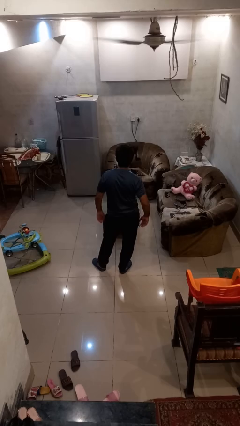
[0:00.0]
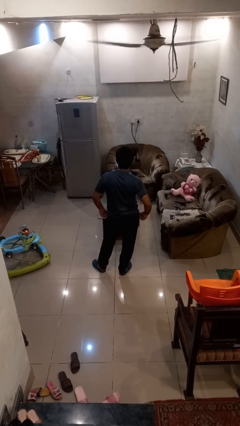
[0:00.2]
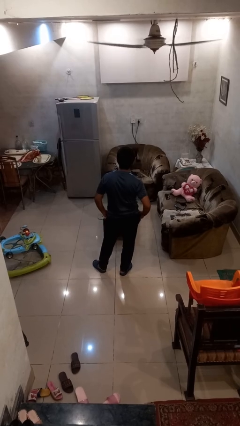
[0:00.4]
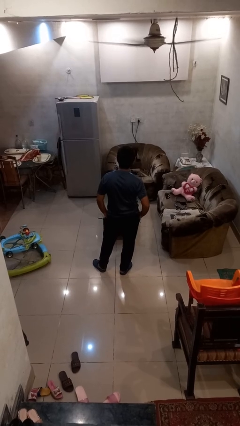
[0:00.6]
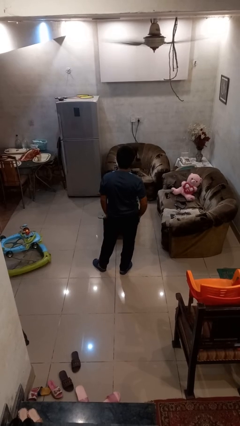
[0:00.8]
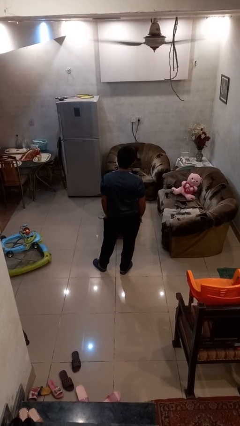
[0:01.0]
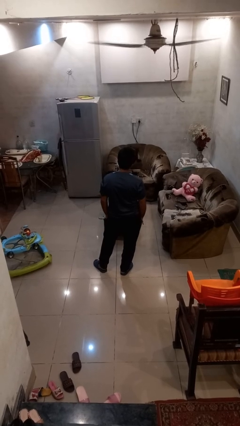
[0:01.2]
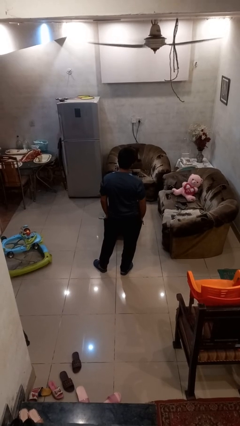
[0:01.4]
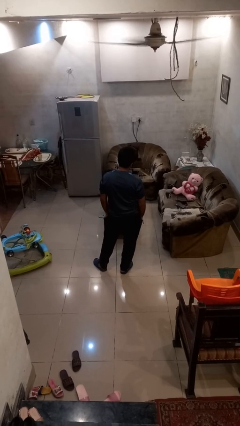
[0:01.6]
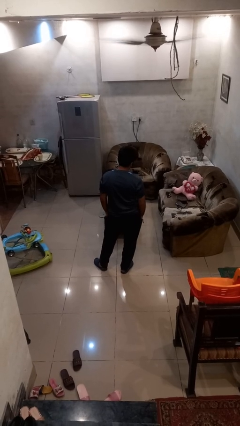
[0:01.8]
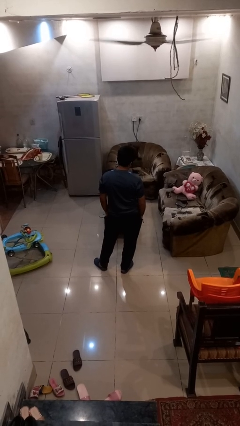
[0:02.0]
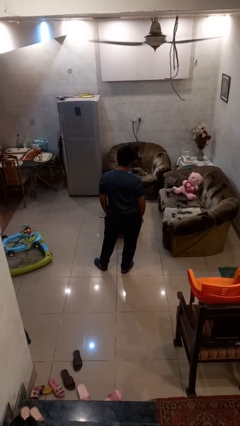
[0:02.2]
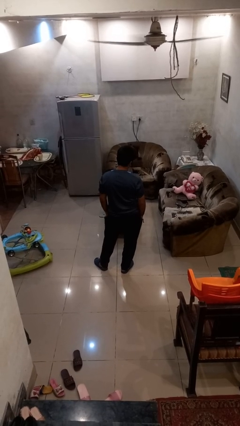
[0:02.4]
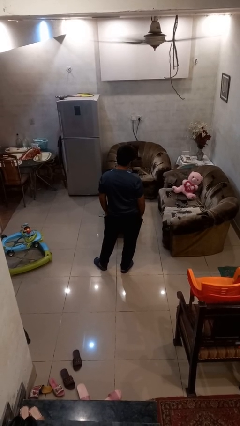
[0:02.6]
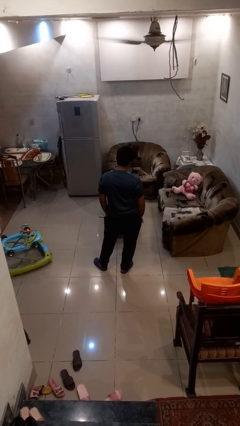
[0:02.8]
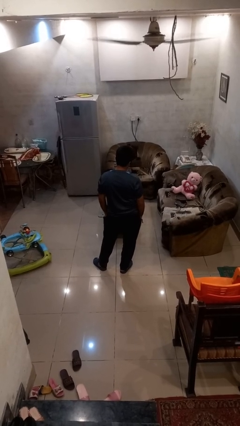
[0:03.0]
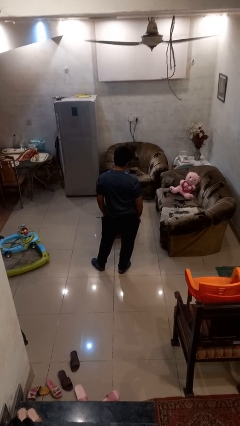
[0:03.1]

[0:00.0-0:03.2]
person puts hands in back pockets

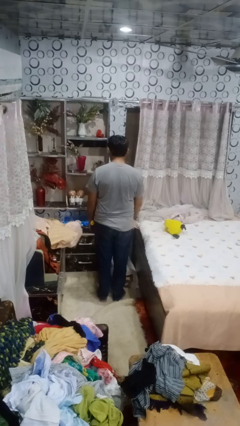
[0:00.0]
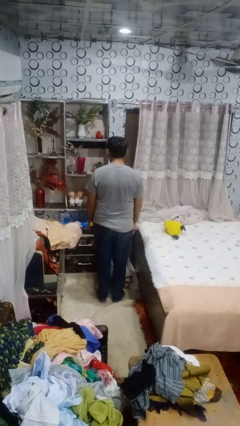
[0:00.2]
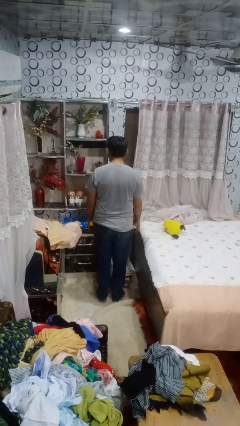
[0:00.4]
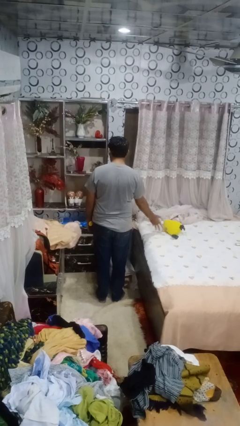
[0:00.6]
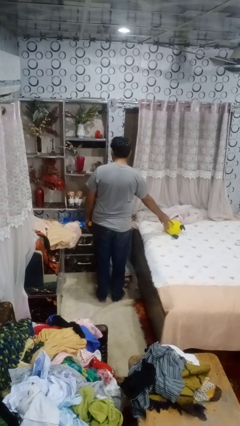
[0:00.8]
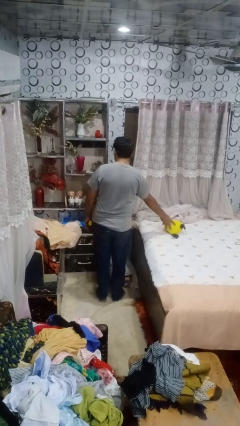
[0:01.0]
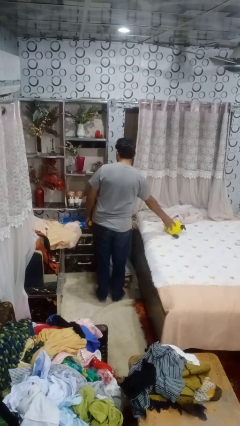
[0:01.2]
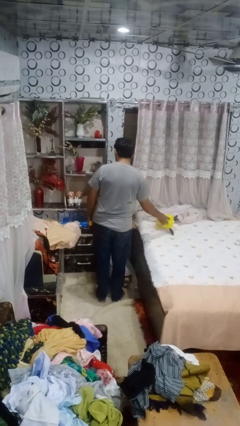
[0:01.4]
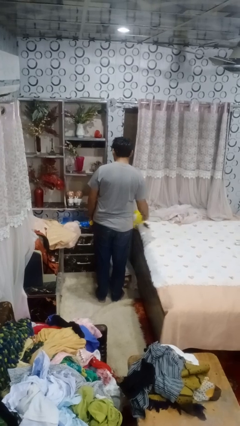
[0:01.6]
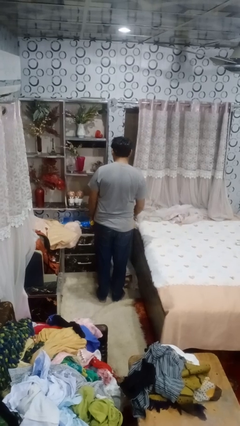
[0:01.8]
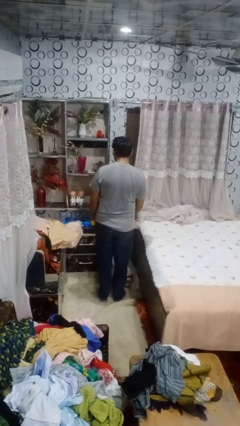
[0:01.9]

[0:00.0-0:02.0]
person picks up object from bed

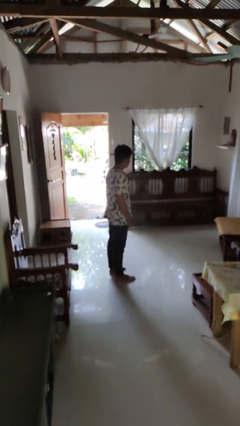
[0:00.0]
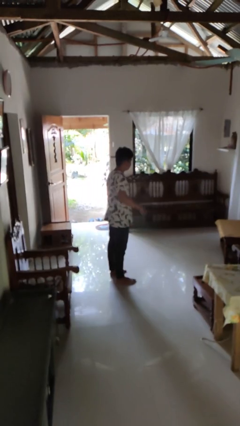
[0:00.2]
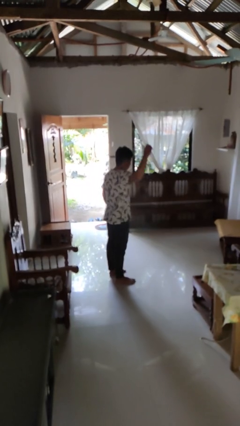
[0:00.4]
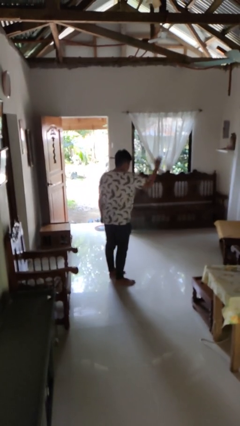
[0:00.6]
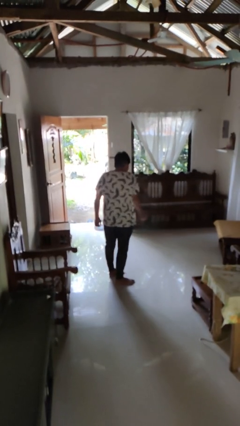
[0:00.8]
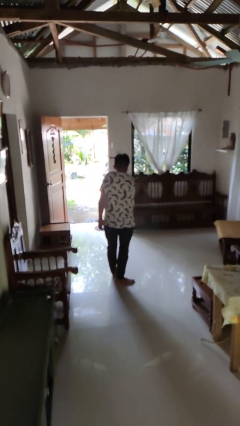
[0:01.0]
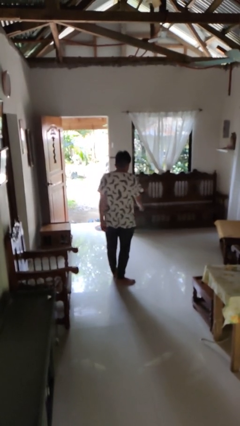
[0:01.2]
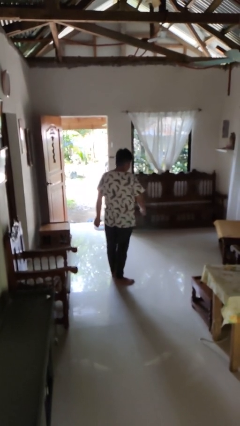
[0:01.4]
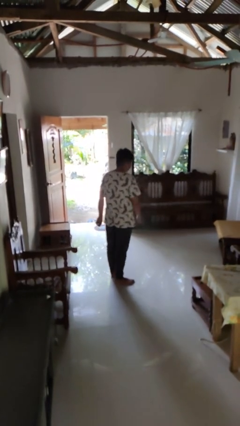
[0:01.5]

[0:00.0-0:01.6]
person karate chop

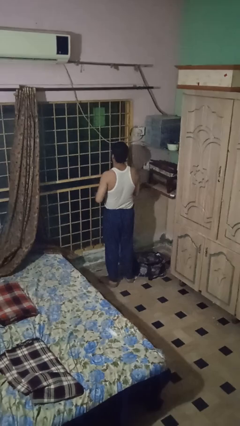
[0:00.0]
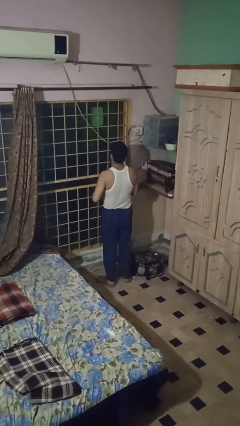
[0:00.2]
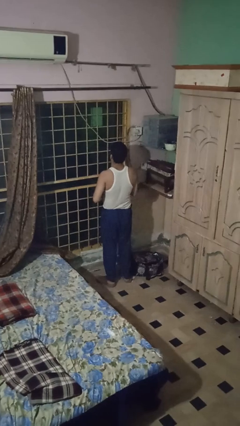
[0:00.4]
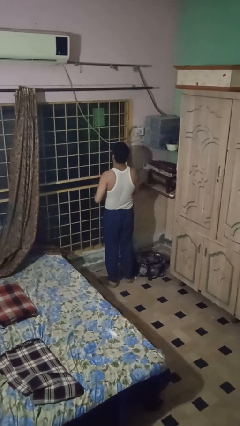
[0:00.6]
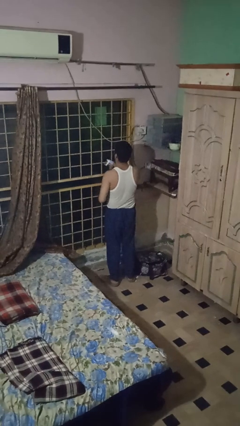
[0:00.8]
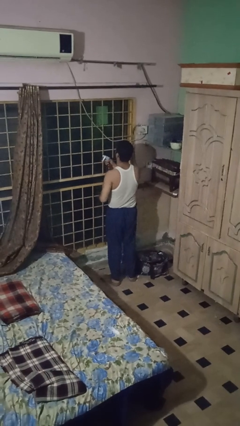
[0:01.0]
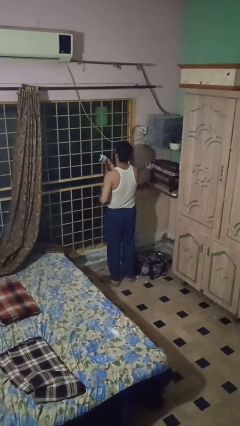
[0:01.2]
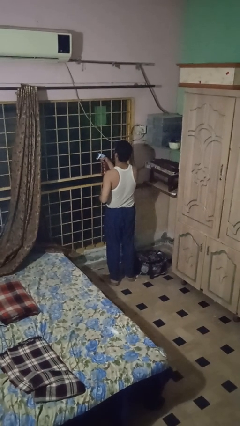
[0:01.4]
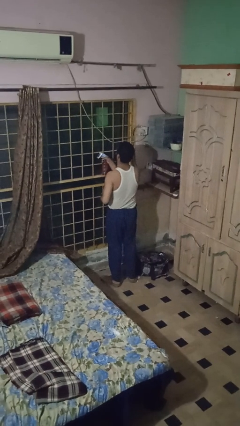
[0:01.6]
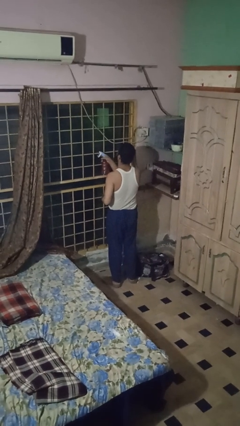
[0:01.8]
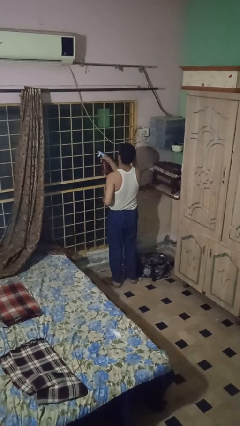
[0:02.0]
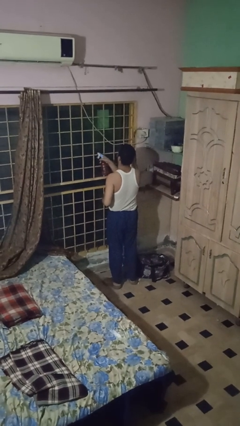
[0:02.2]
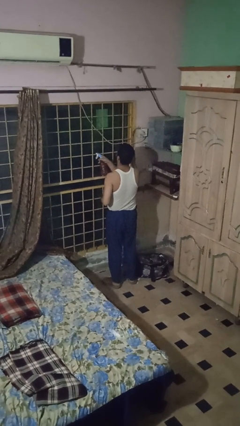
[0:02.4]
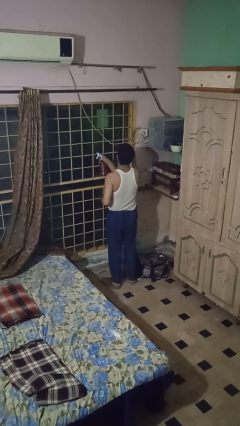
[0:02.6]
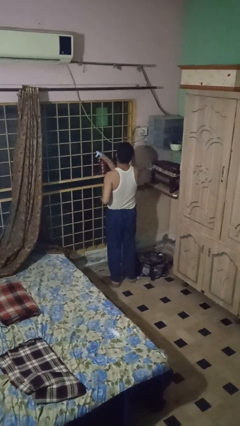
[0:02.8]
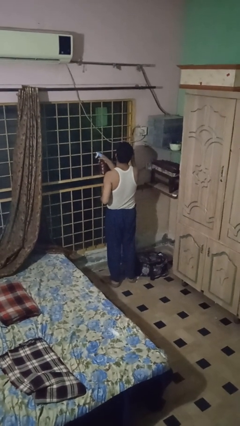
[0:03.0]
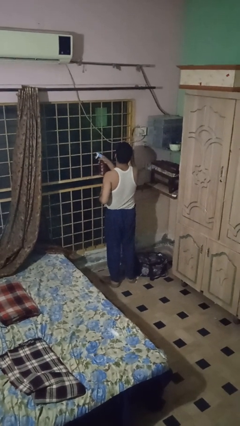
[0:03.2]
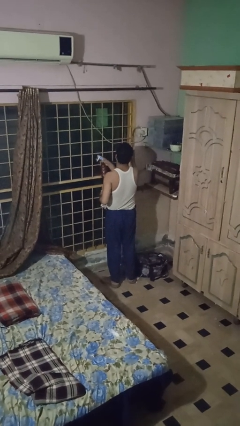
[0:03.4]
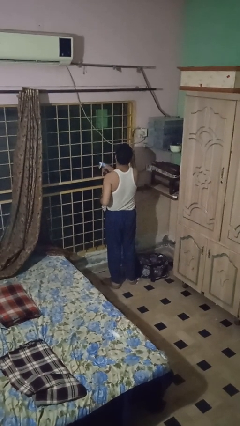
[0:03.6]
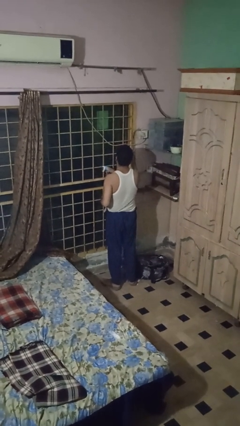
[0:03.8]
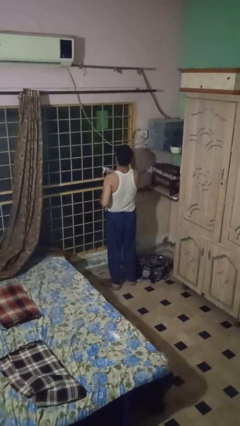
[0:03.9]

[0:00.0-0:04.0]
person sprays from bottle

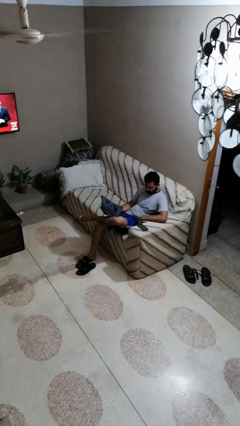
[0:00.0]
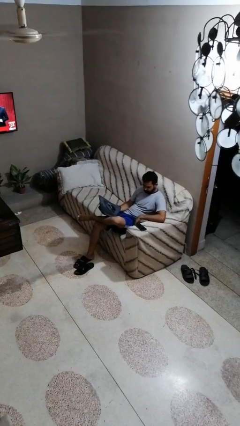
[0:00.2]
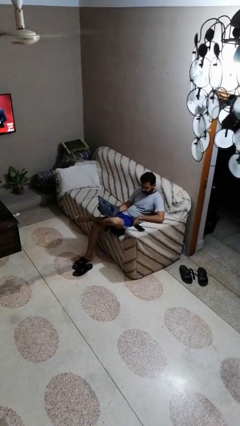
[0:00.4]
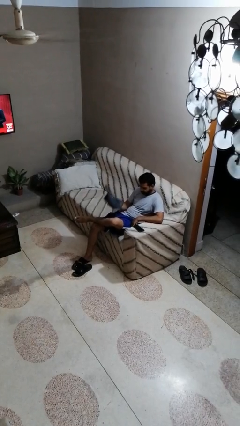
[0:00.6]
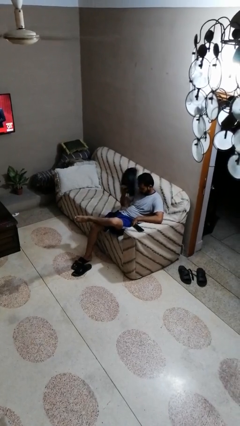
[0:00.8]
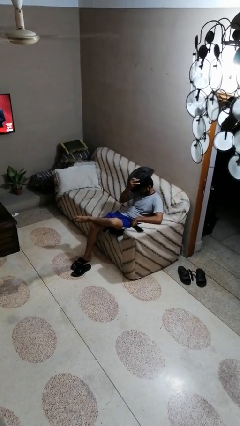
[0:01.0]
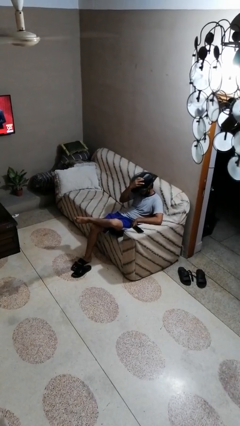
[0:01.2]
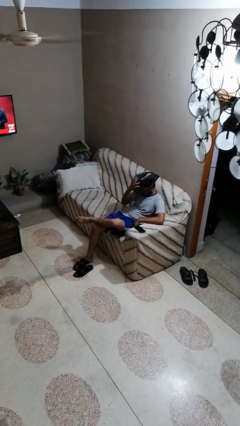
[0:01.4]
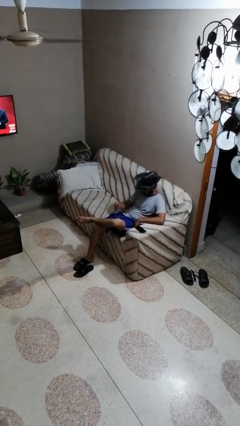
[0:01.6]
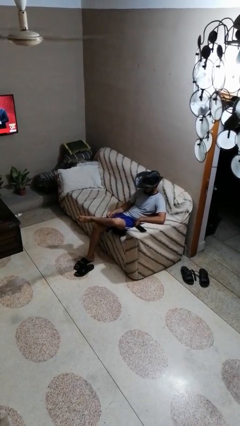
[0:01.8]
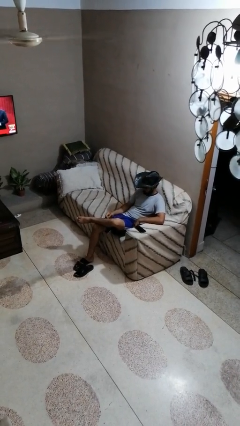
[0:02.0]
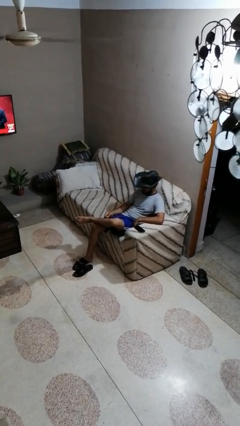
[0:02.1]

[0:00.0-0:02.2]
person puts on hat

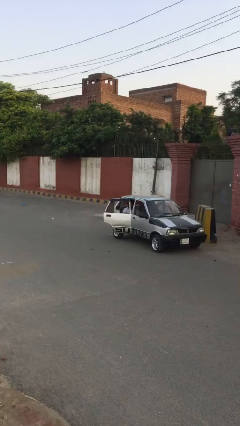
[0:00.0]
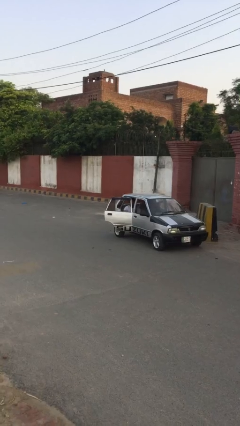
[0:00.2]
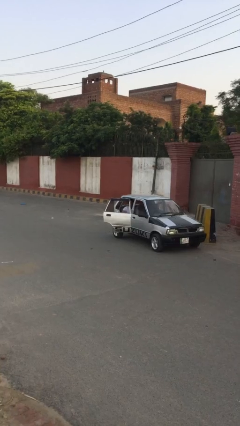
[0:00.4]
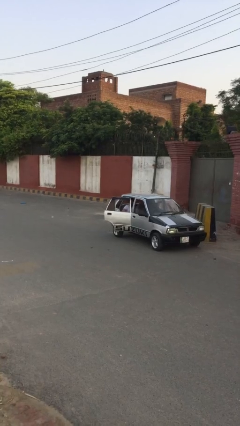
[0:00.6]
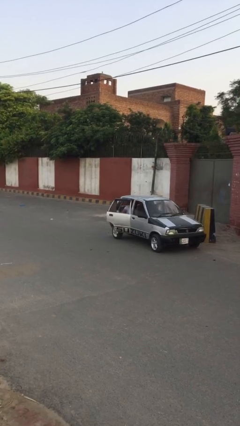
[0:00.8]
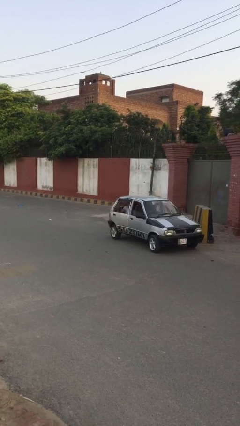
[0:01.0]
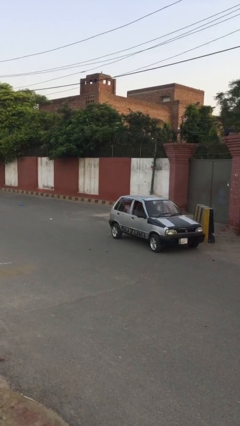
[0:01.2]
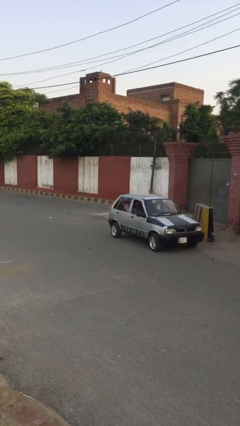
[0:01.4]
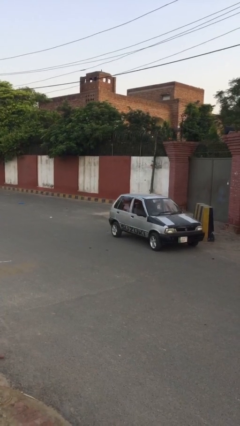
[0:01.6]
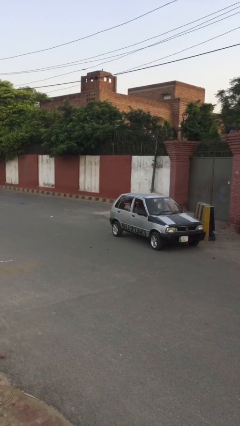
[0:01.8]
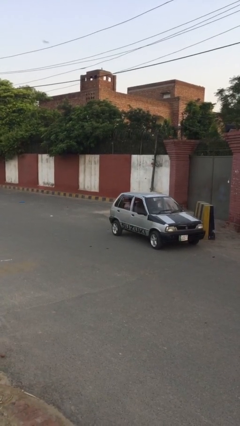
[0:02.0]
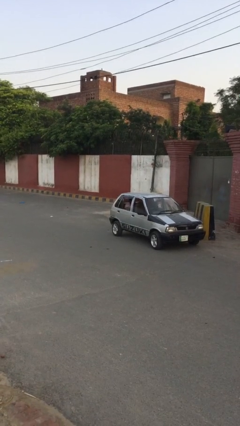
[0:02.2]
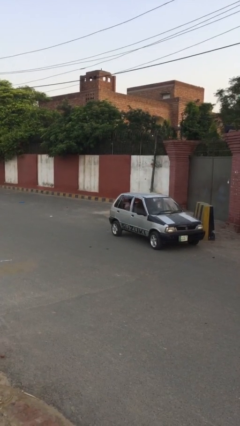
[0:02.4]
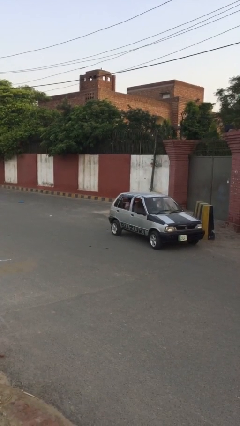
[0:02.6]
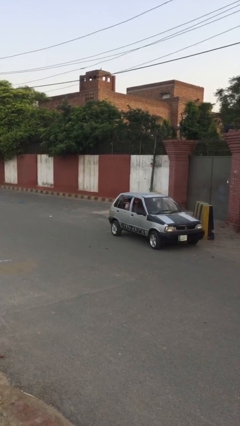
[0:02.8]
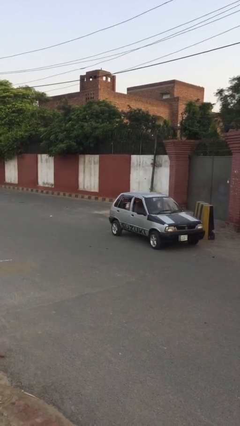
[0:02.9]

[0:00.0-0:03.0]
person closes car door

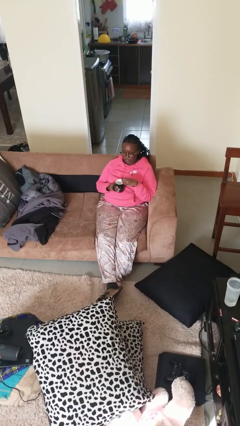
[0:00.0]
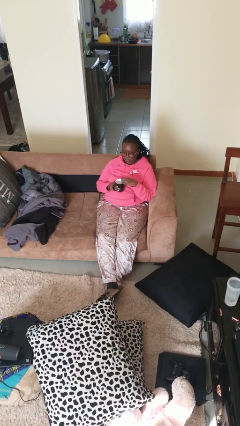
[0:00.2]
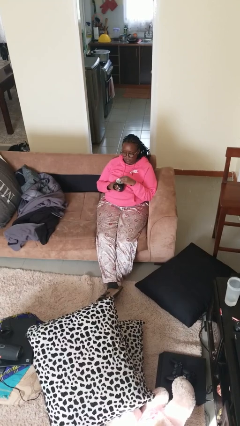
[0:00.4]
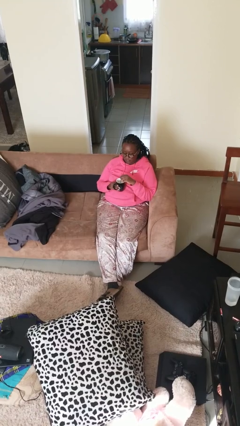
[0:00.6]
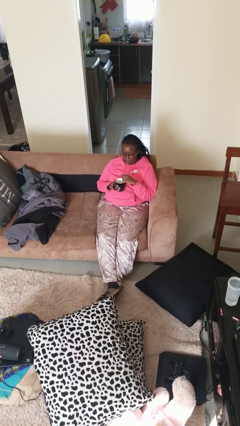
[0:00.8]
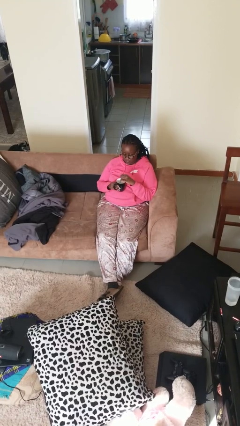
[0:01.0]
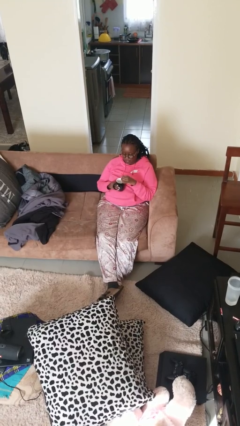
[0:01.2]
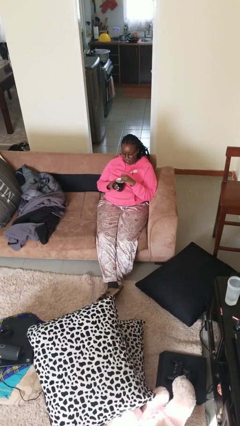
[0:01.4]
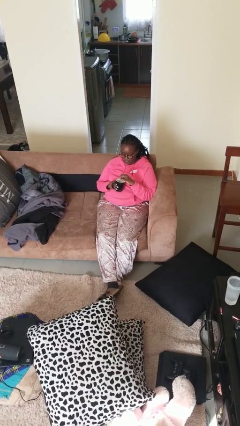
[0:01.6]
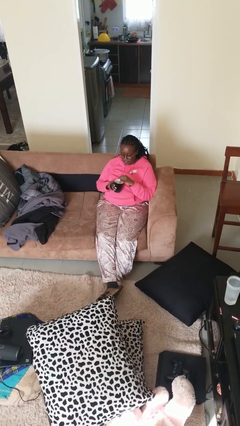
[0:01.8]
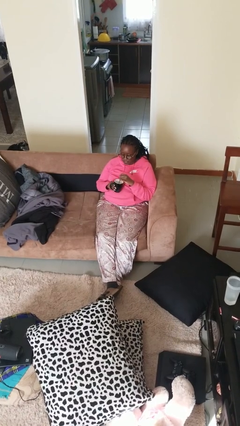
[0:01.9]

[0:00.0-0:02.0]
person stirs mug
